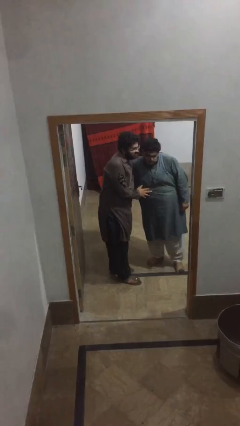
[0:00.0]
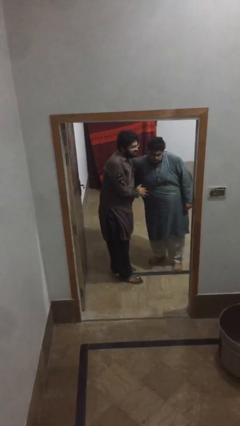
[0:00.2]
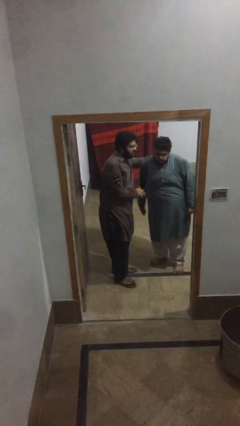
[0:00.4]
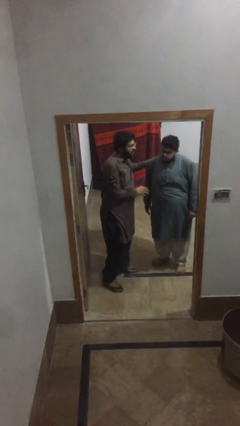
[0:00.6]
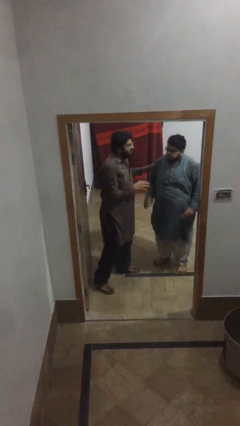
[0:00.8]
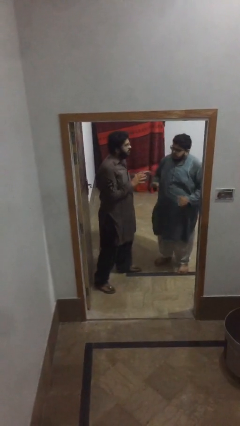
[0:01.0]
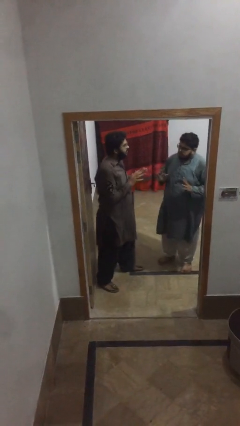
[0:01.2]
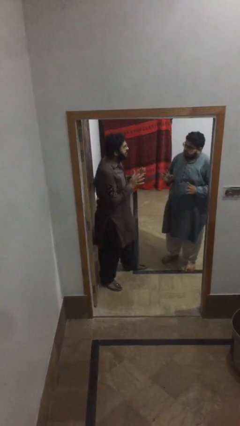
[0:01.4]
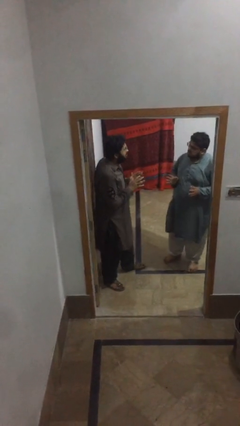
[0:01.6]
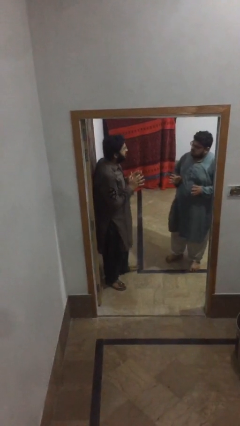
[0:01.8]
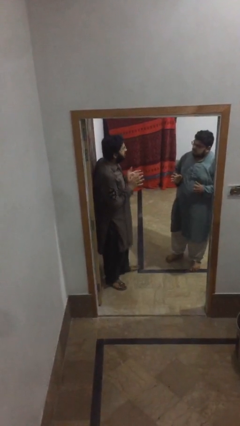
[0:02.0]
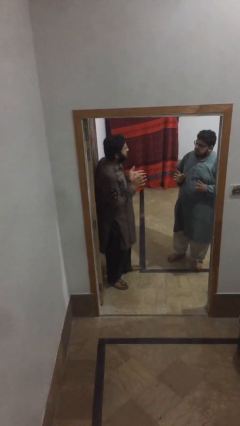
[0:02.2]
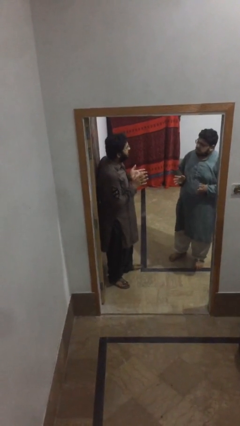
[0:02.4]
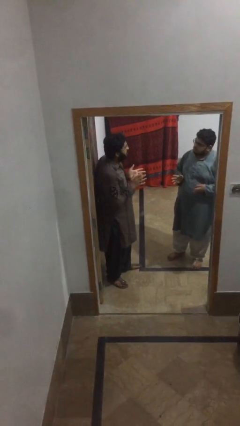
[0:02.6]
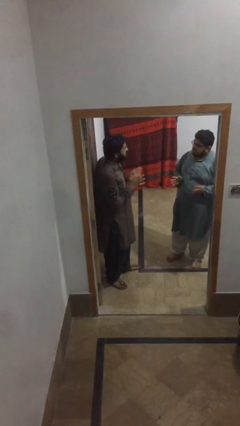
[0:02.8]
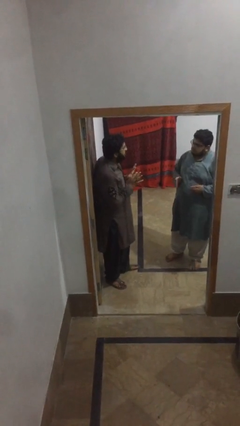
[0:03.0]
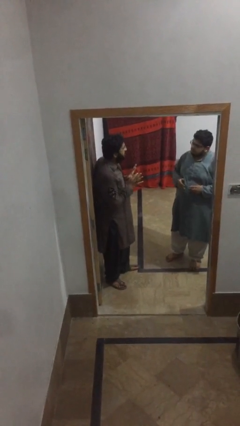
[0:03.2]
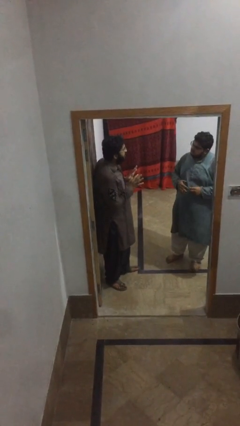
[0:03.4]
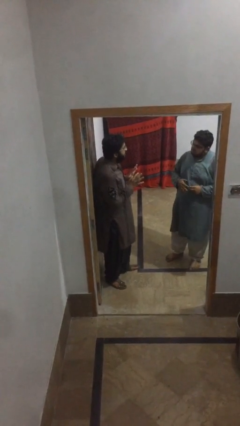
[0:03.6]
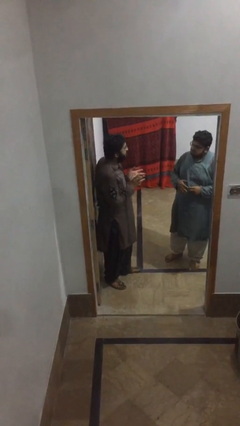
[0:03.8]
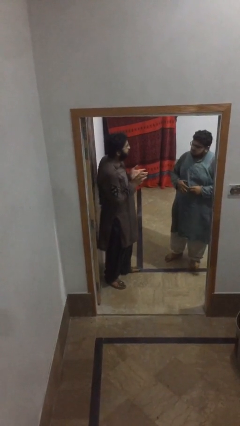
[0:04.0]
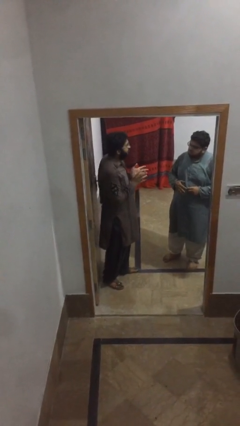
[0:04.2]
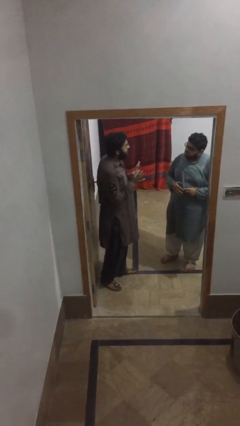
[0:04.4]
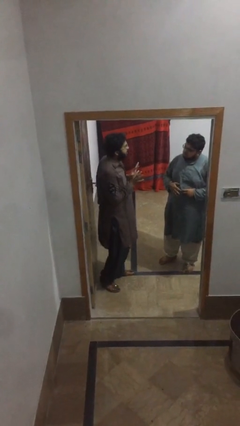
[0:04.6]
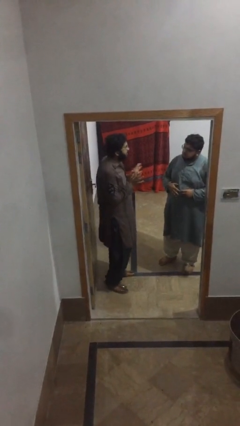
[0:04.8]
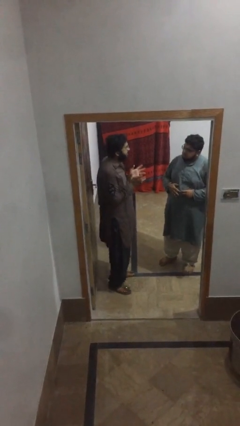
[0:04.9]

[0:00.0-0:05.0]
person talks to person

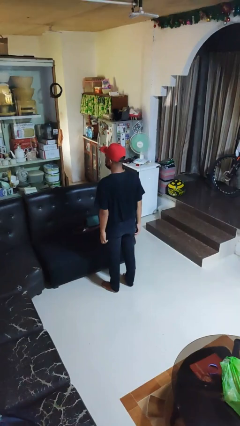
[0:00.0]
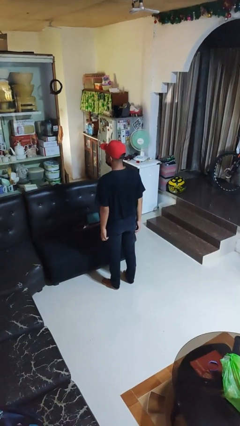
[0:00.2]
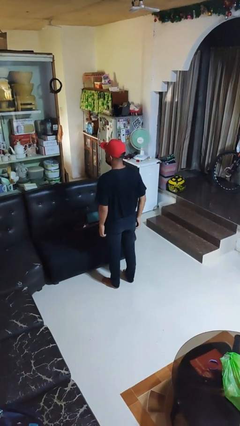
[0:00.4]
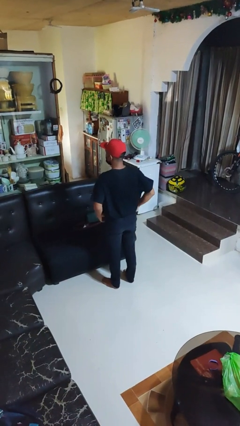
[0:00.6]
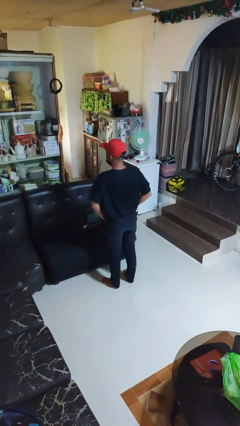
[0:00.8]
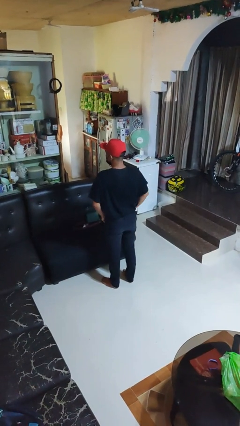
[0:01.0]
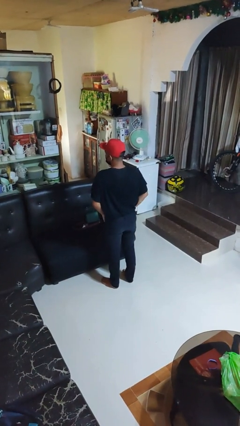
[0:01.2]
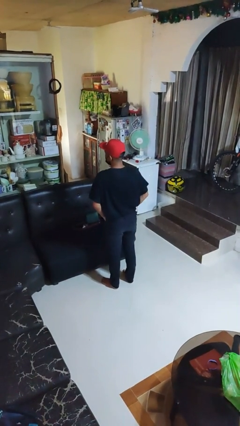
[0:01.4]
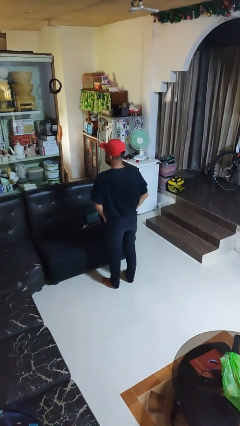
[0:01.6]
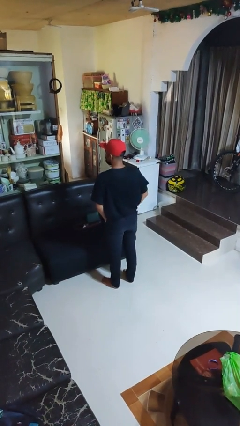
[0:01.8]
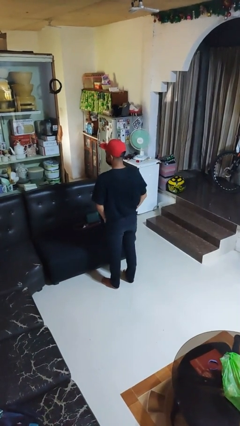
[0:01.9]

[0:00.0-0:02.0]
person puts hands in back pockets

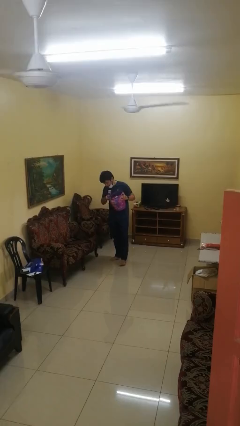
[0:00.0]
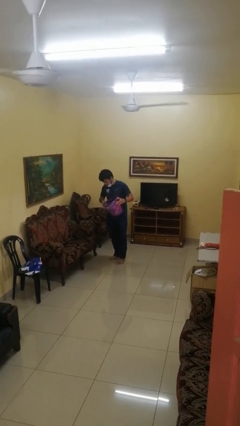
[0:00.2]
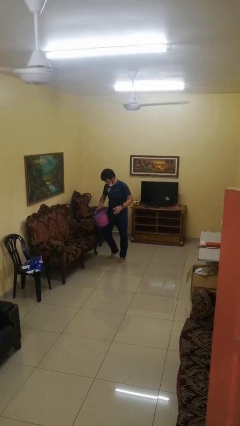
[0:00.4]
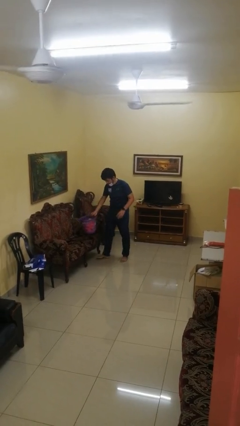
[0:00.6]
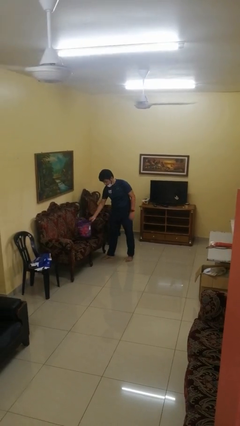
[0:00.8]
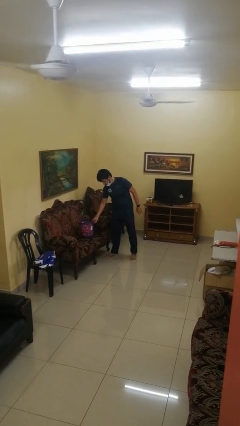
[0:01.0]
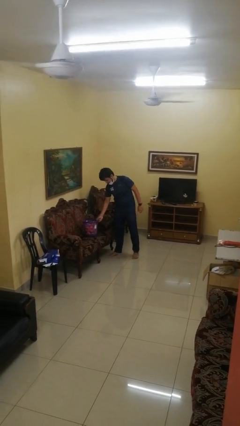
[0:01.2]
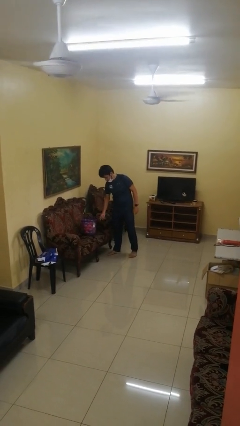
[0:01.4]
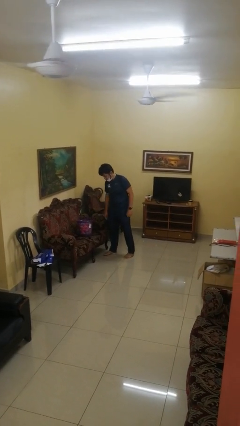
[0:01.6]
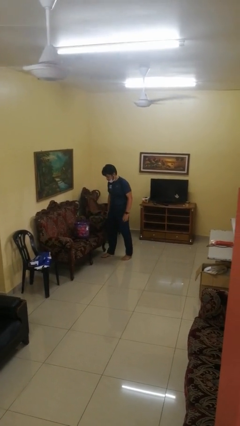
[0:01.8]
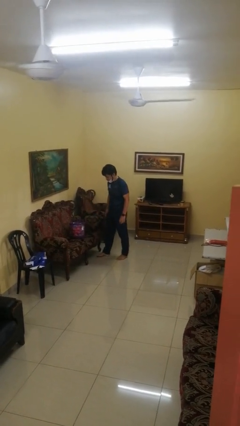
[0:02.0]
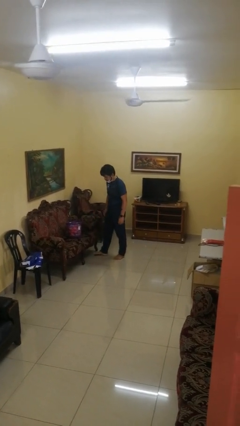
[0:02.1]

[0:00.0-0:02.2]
person puts down object on couch

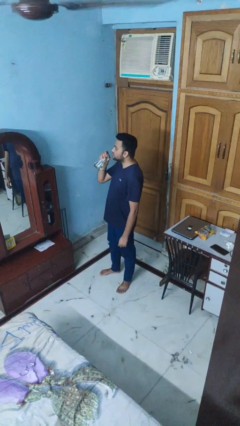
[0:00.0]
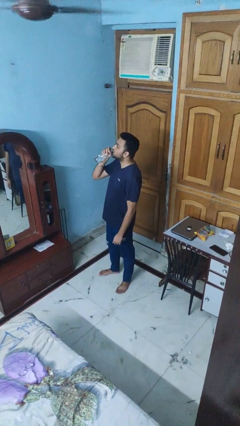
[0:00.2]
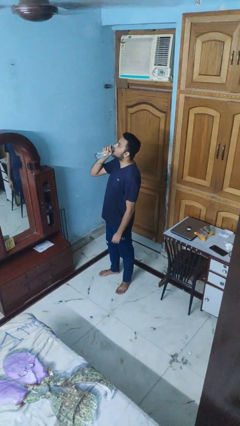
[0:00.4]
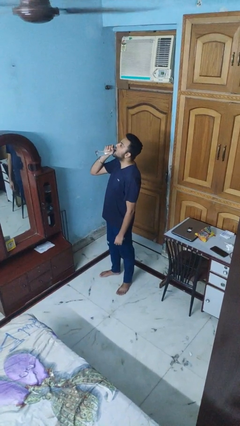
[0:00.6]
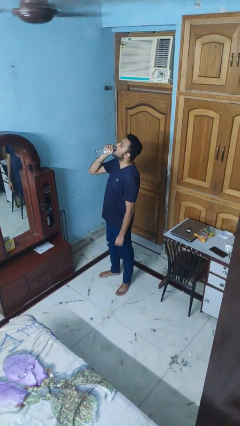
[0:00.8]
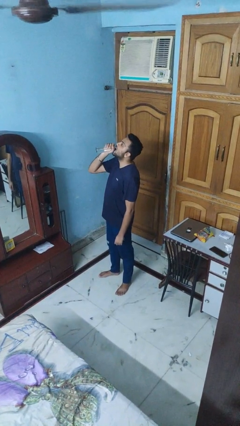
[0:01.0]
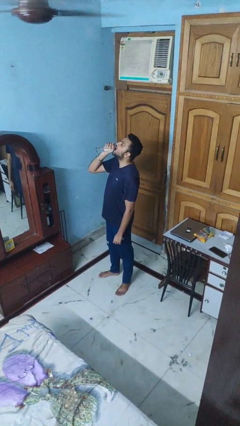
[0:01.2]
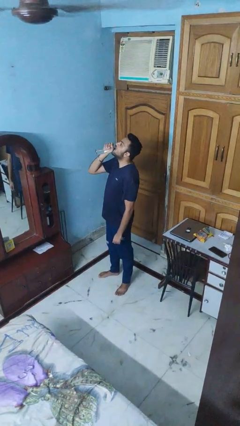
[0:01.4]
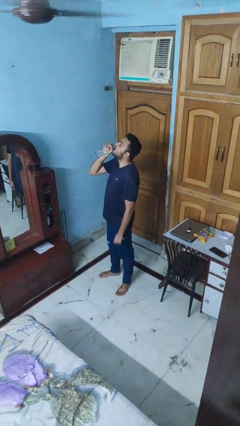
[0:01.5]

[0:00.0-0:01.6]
person drinks from bottle

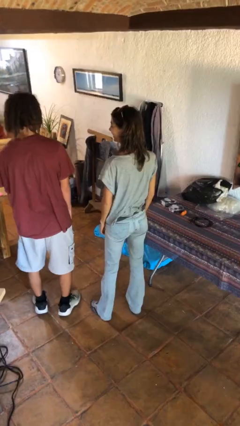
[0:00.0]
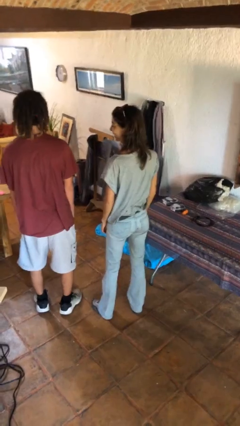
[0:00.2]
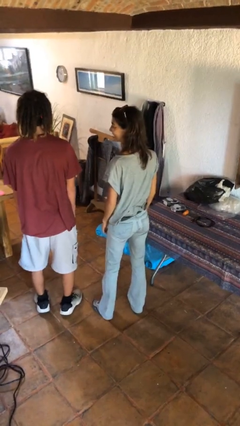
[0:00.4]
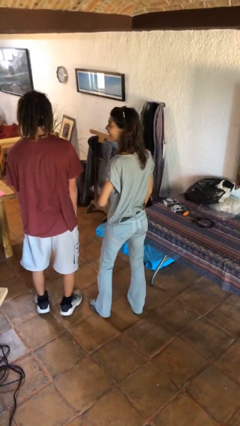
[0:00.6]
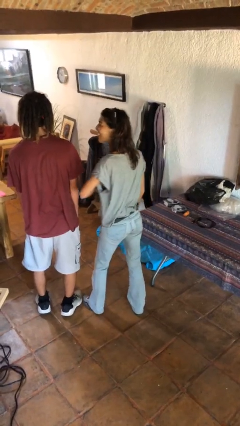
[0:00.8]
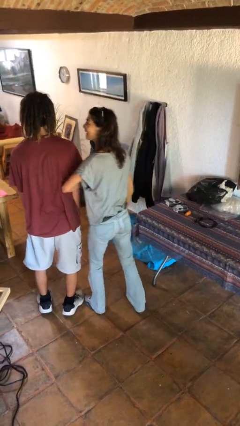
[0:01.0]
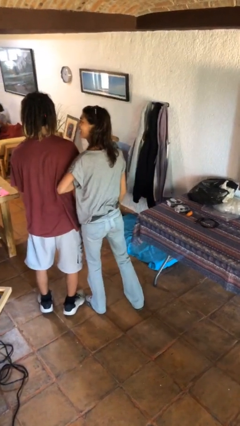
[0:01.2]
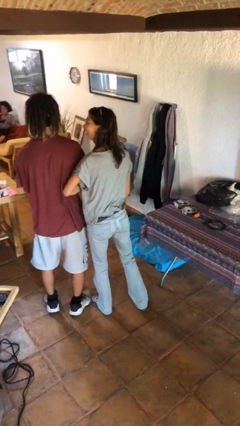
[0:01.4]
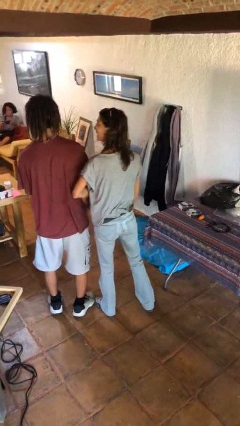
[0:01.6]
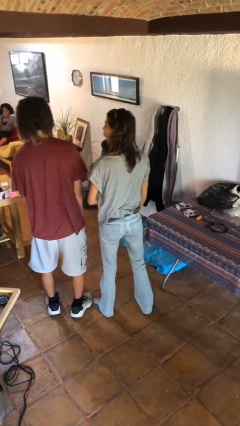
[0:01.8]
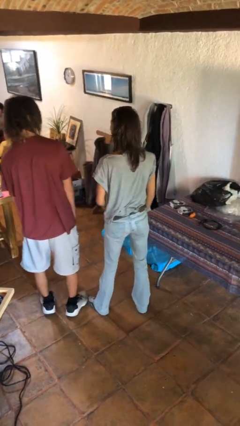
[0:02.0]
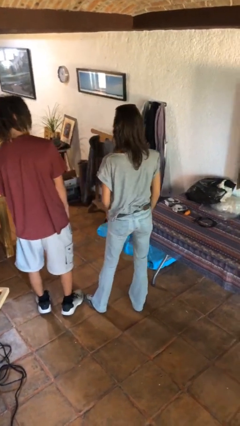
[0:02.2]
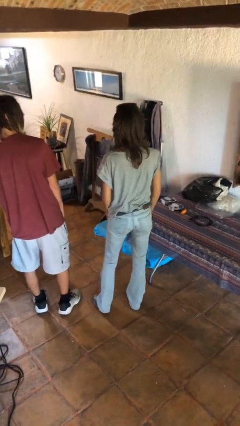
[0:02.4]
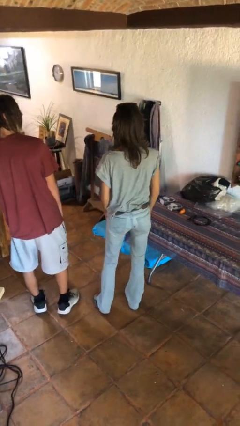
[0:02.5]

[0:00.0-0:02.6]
person nudges person with elbow

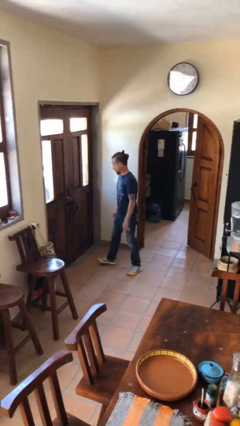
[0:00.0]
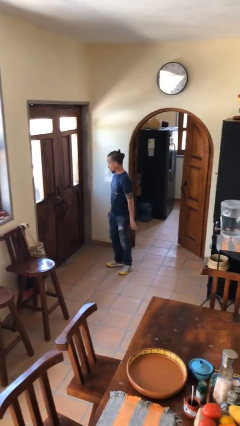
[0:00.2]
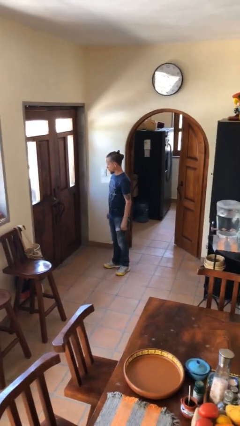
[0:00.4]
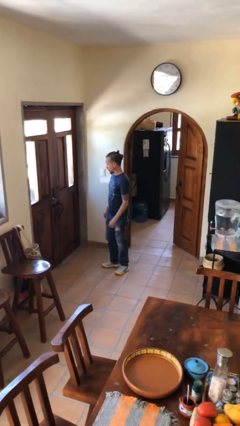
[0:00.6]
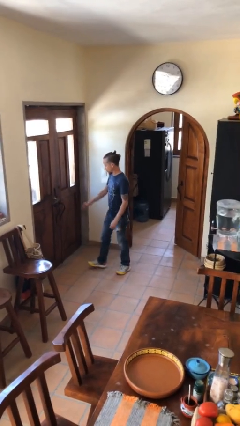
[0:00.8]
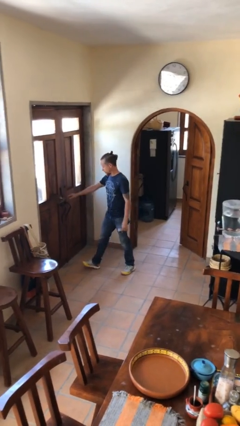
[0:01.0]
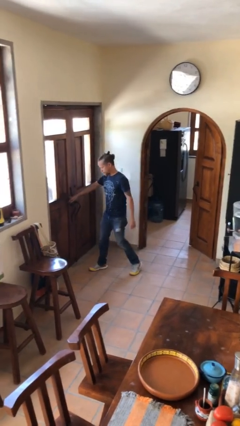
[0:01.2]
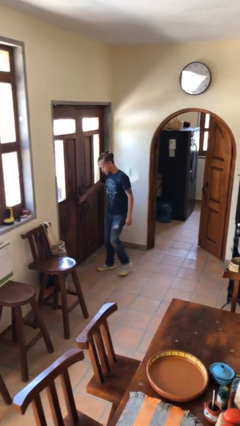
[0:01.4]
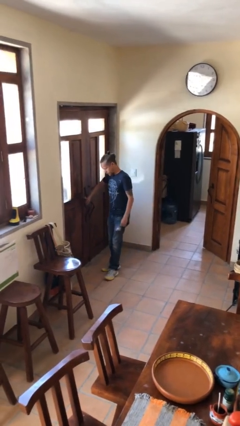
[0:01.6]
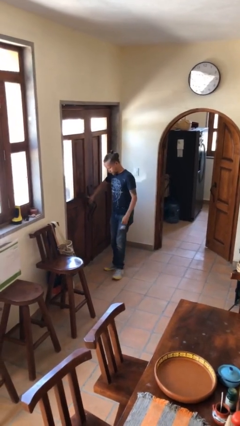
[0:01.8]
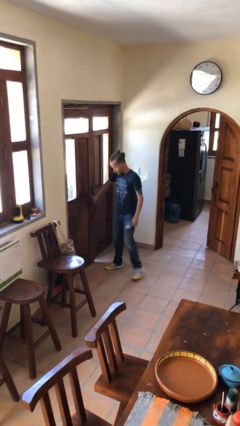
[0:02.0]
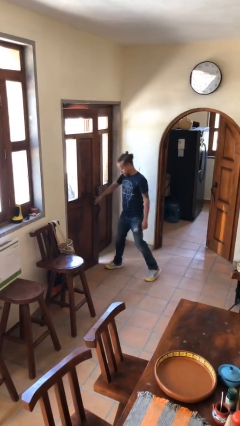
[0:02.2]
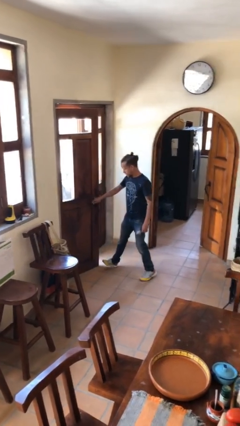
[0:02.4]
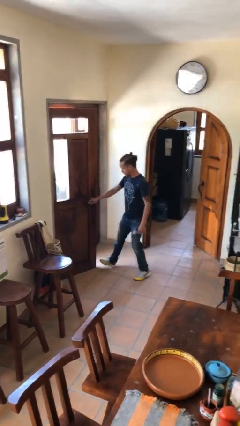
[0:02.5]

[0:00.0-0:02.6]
person opens facility door

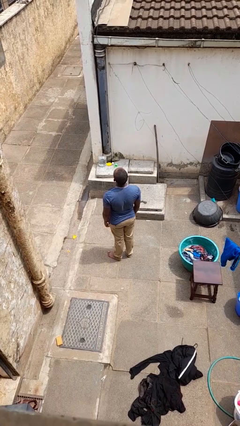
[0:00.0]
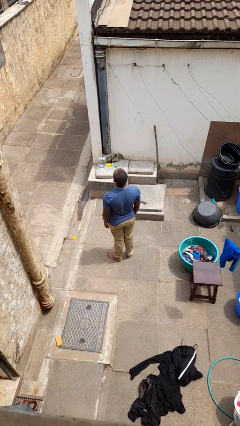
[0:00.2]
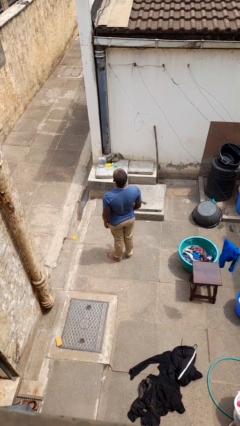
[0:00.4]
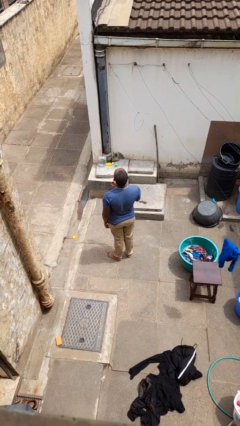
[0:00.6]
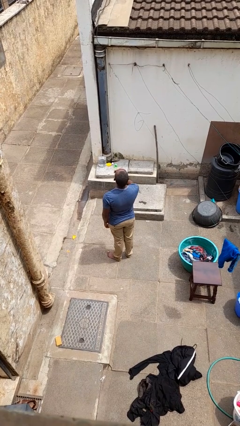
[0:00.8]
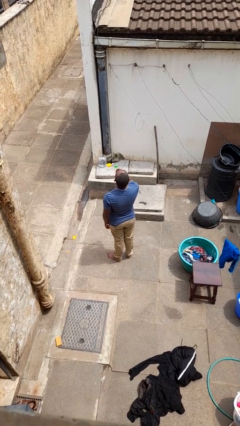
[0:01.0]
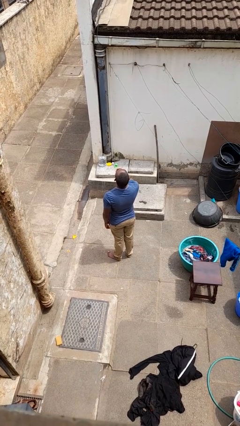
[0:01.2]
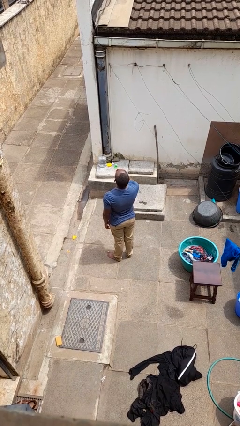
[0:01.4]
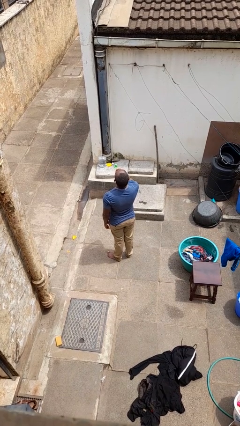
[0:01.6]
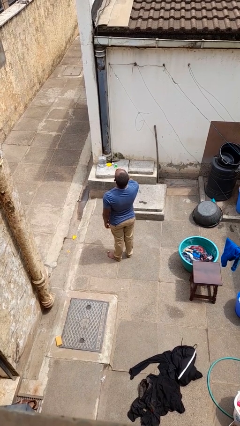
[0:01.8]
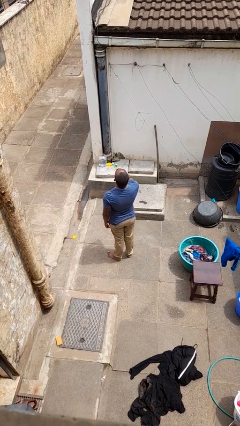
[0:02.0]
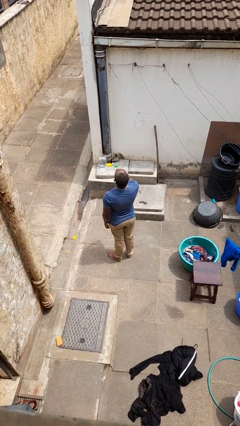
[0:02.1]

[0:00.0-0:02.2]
person yawns
